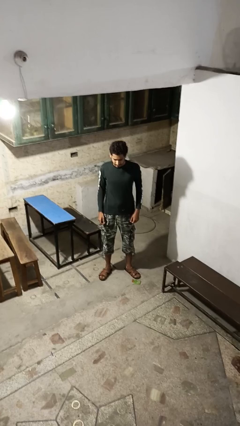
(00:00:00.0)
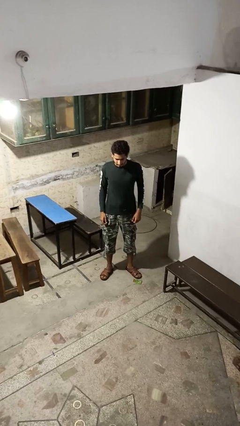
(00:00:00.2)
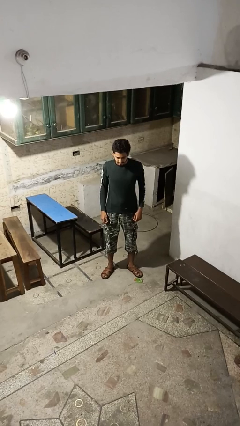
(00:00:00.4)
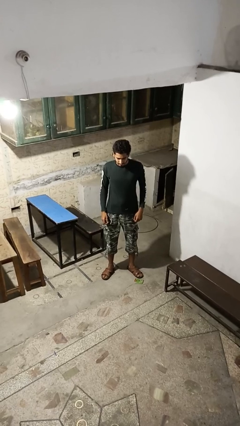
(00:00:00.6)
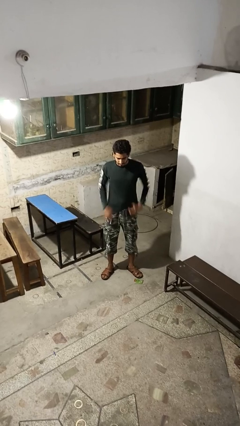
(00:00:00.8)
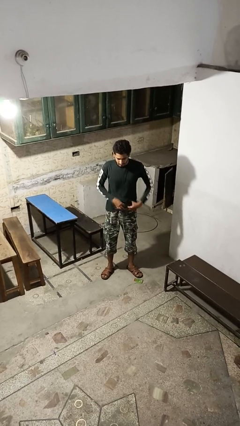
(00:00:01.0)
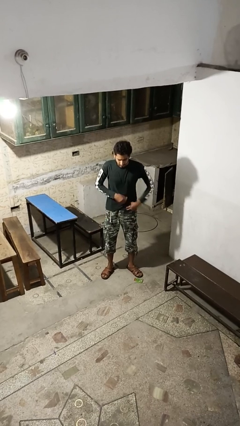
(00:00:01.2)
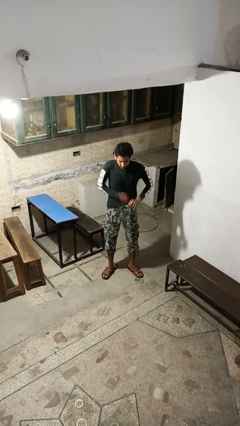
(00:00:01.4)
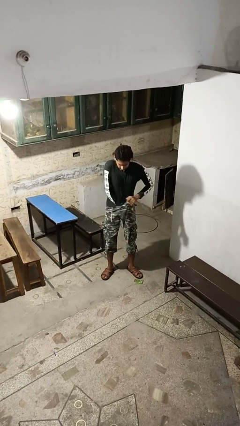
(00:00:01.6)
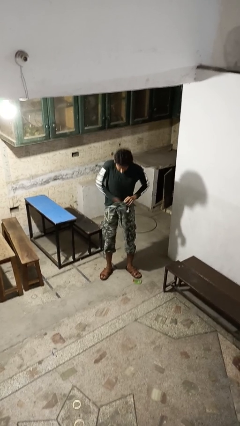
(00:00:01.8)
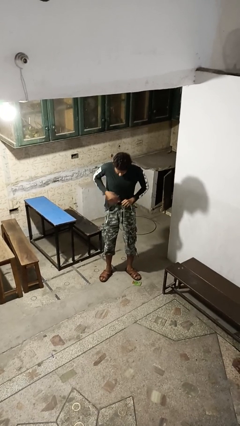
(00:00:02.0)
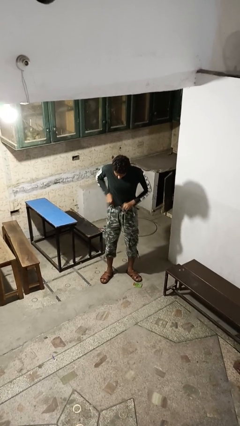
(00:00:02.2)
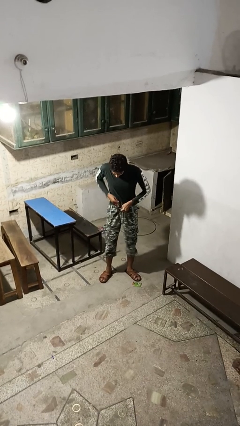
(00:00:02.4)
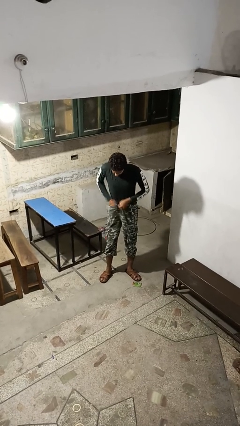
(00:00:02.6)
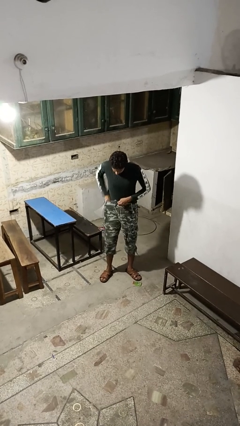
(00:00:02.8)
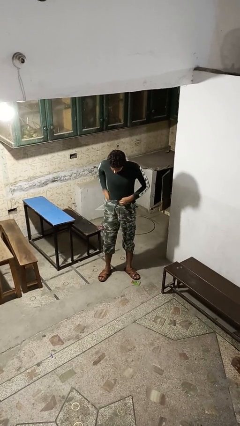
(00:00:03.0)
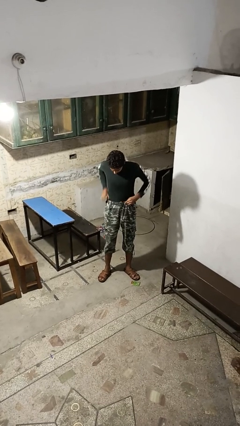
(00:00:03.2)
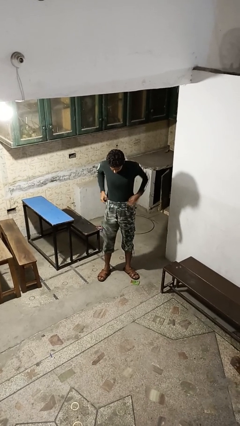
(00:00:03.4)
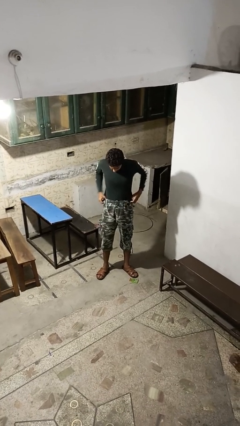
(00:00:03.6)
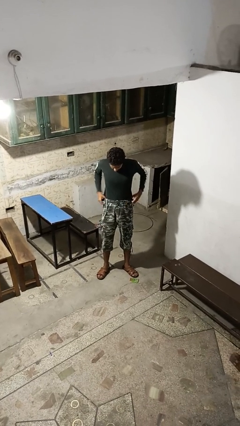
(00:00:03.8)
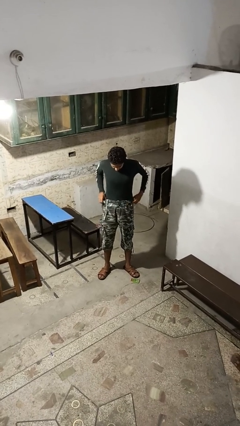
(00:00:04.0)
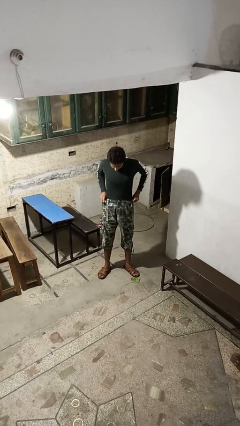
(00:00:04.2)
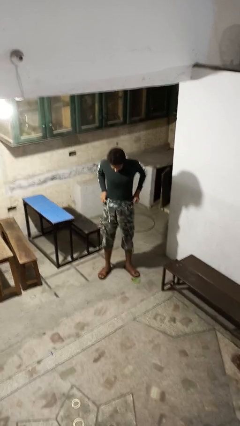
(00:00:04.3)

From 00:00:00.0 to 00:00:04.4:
person tucks in shirt

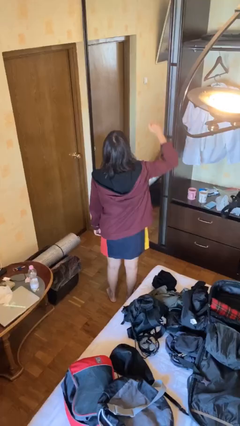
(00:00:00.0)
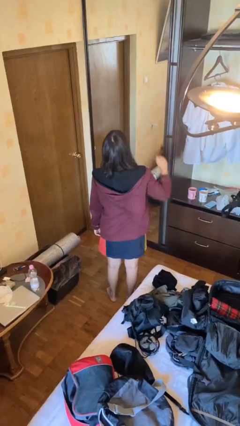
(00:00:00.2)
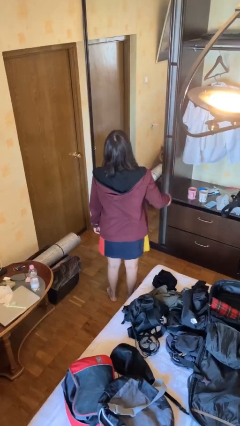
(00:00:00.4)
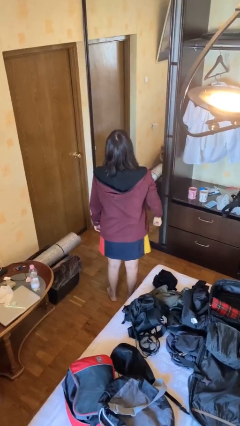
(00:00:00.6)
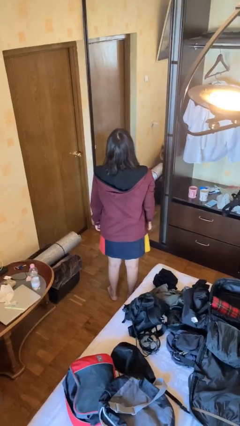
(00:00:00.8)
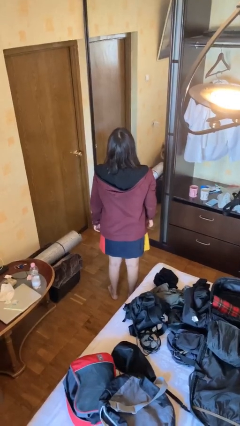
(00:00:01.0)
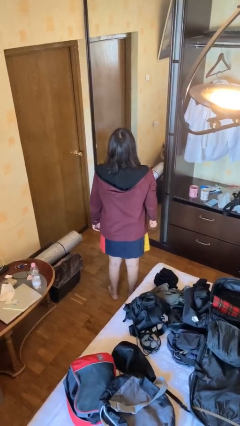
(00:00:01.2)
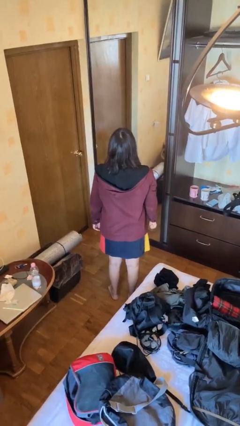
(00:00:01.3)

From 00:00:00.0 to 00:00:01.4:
person gestures lower hand

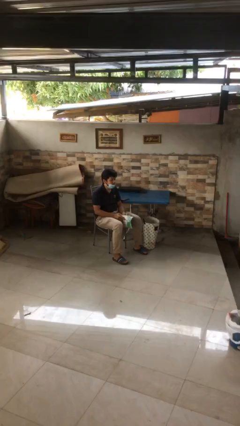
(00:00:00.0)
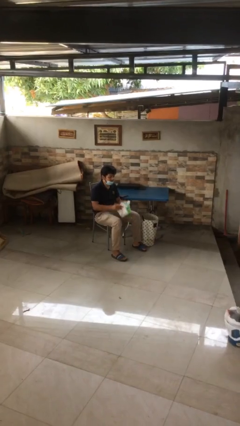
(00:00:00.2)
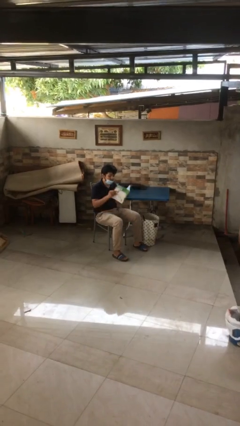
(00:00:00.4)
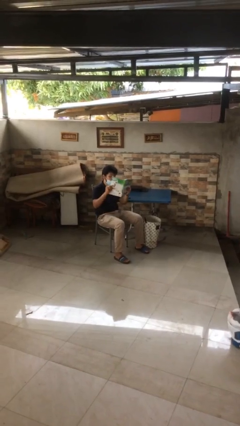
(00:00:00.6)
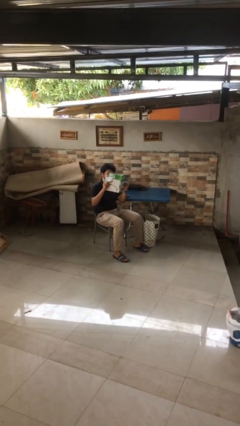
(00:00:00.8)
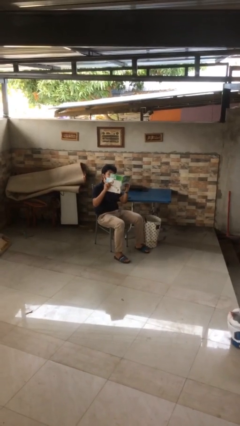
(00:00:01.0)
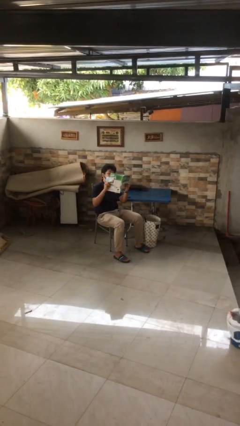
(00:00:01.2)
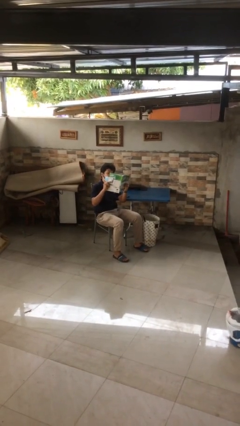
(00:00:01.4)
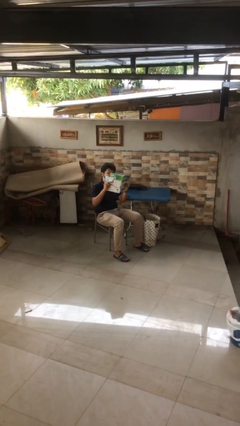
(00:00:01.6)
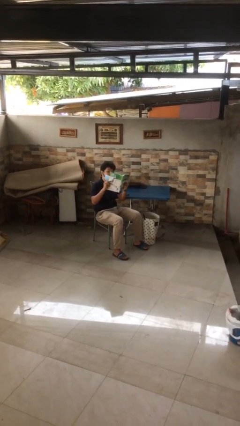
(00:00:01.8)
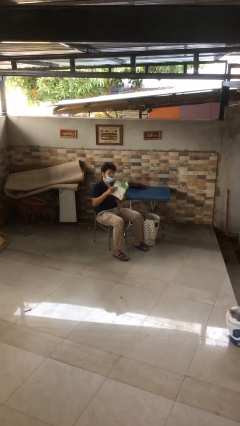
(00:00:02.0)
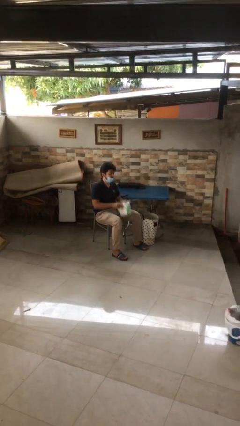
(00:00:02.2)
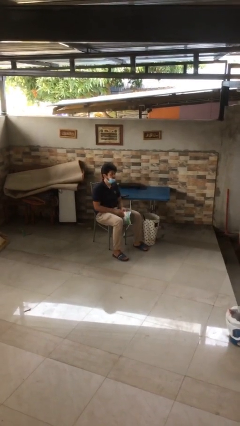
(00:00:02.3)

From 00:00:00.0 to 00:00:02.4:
person reads magazine

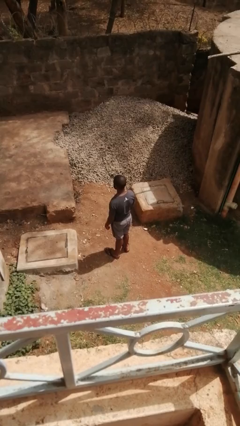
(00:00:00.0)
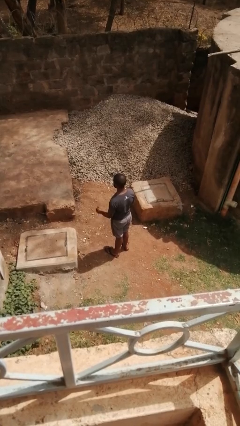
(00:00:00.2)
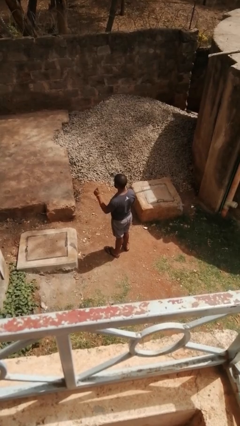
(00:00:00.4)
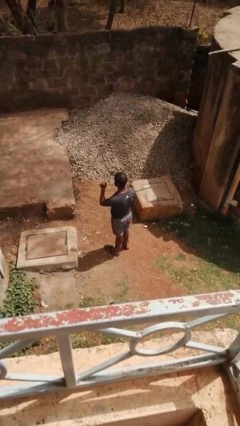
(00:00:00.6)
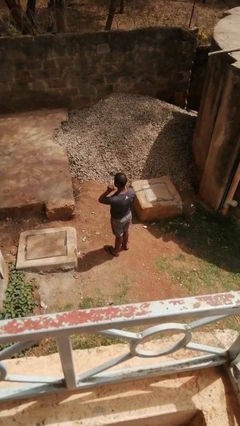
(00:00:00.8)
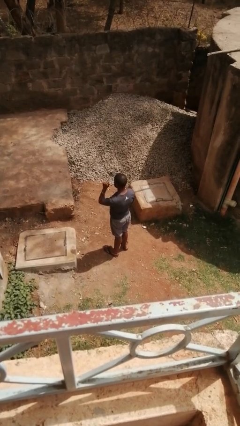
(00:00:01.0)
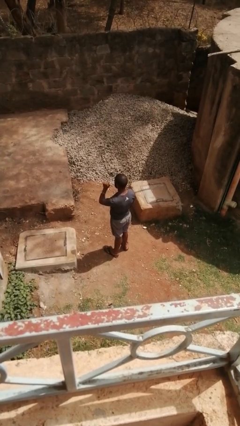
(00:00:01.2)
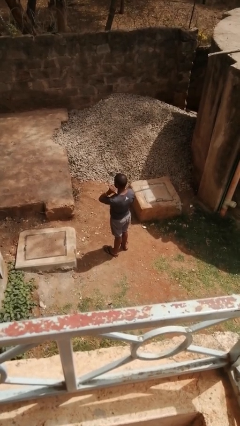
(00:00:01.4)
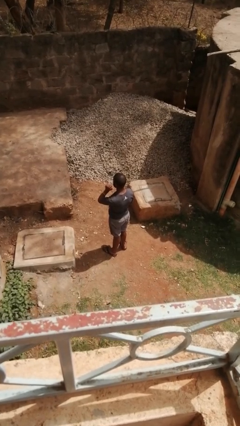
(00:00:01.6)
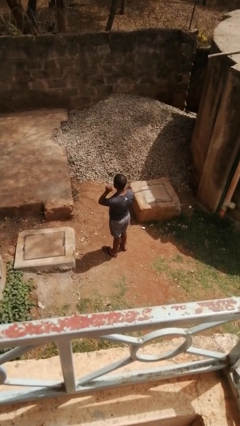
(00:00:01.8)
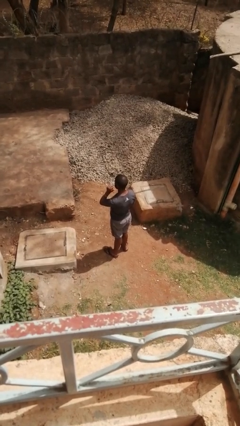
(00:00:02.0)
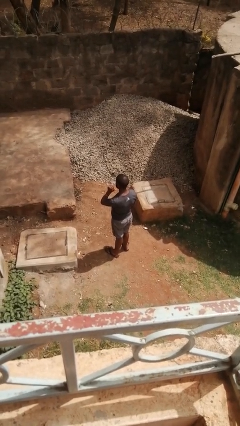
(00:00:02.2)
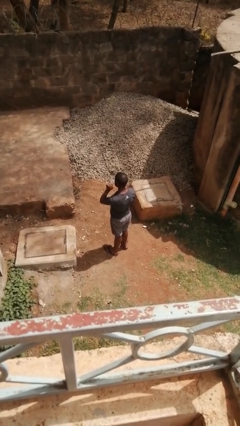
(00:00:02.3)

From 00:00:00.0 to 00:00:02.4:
person gestures behind me

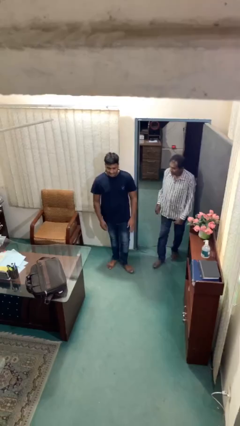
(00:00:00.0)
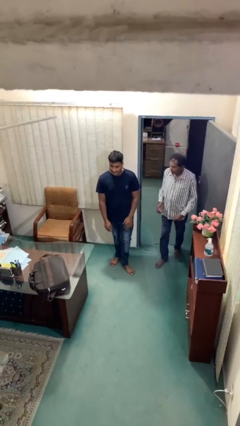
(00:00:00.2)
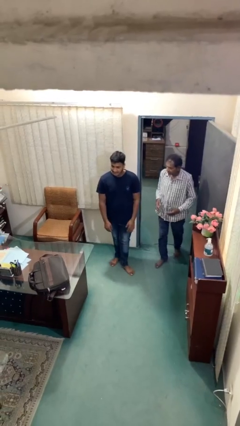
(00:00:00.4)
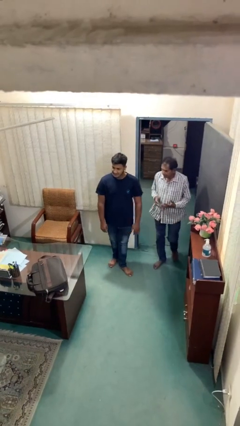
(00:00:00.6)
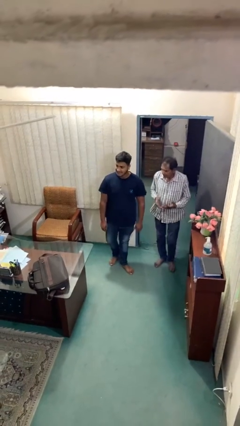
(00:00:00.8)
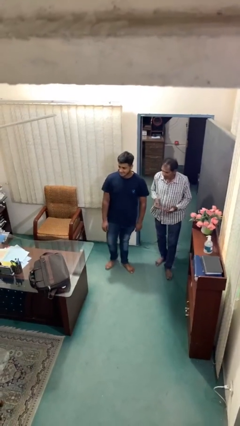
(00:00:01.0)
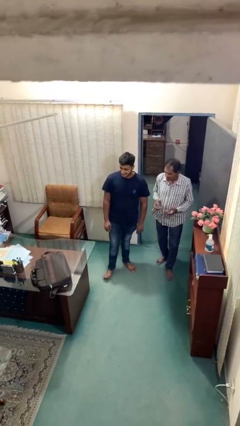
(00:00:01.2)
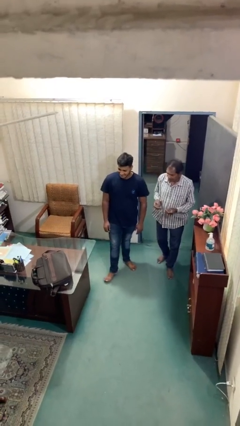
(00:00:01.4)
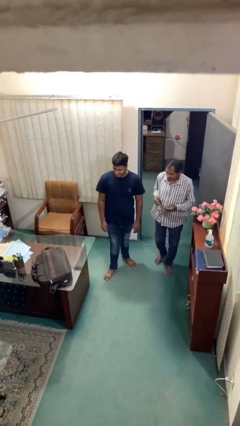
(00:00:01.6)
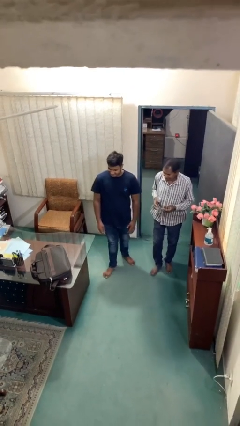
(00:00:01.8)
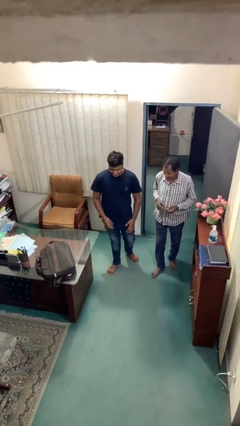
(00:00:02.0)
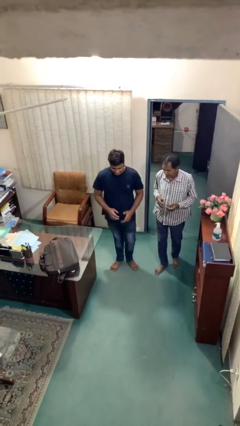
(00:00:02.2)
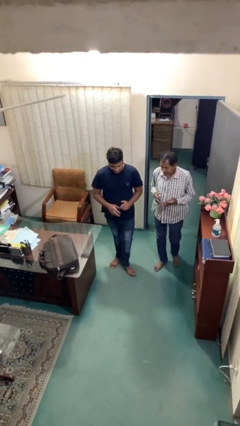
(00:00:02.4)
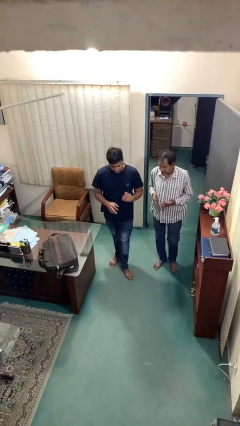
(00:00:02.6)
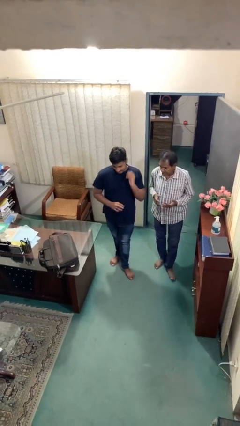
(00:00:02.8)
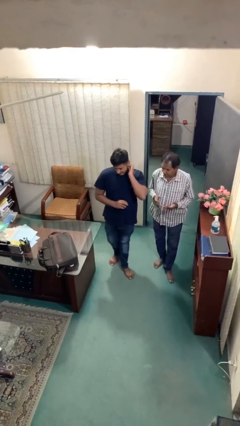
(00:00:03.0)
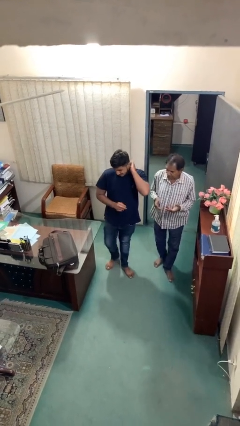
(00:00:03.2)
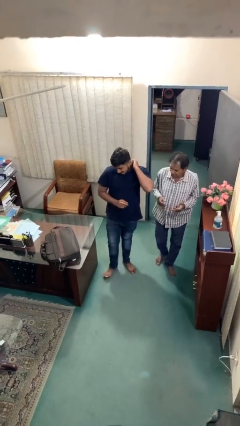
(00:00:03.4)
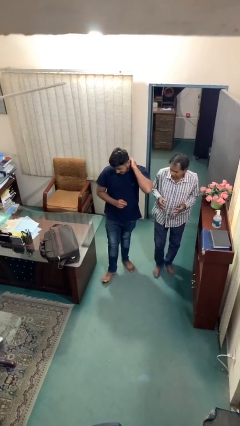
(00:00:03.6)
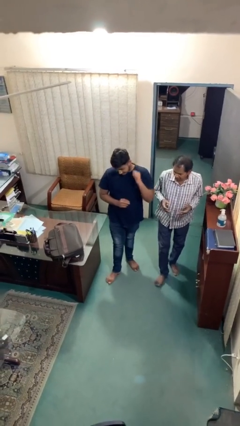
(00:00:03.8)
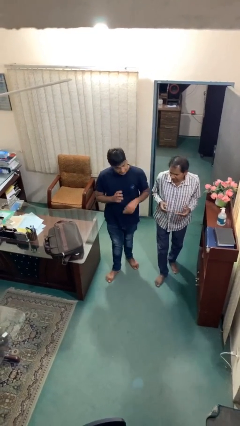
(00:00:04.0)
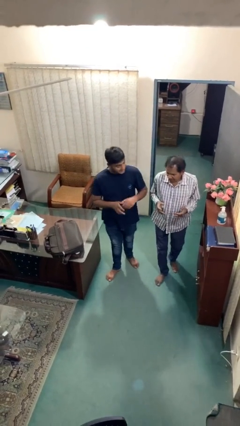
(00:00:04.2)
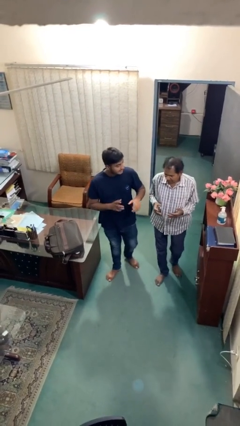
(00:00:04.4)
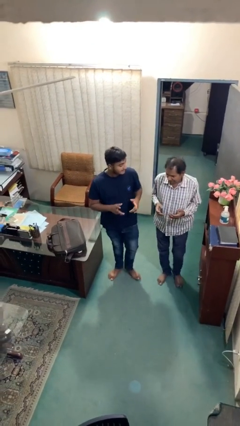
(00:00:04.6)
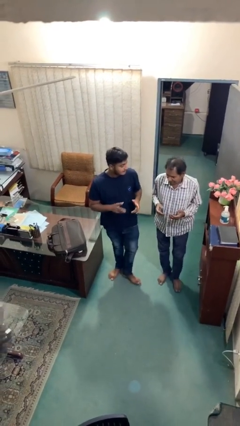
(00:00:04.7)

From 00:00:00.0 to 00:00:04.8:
person talks to person

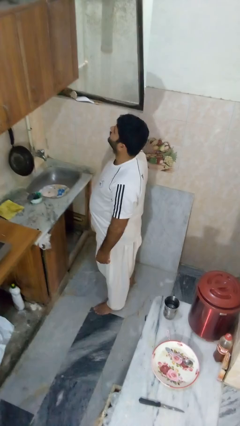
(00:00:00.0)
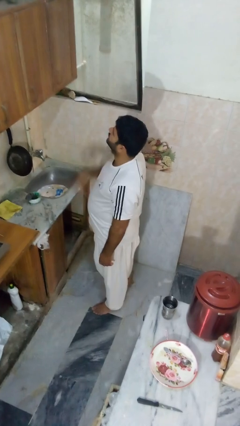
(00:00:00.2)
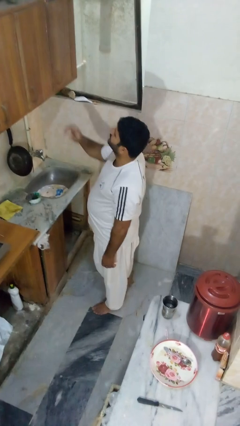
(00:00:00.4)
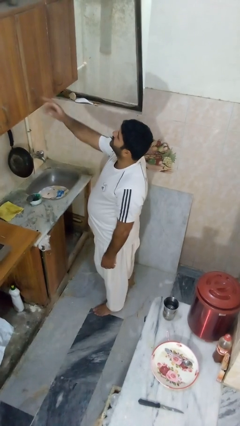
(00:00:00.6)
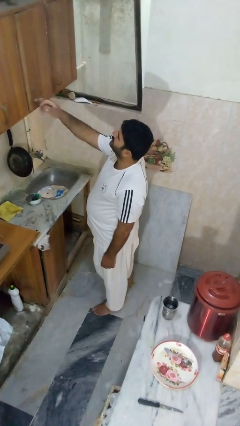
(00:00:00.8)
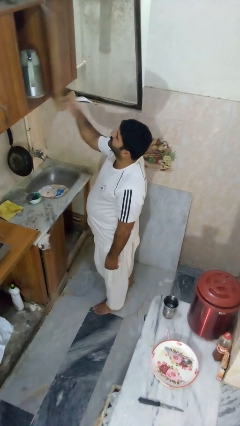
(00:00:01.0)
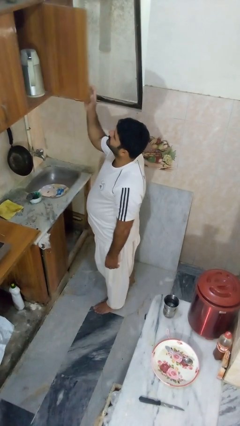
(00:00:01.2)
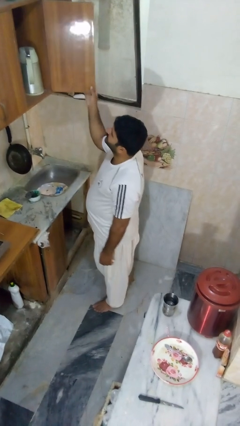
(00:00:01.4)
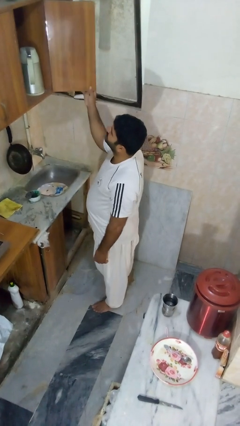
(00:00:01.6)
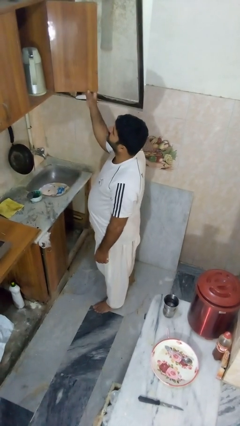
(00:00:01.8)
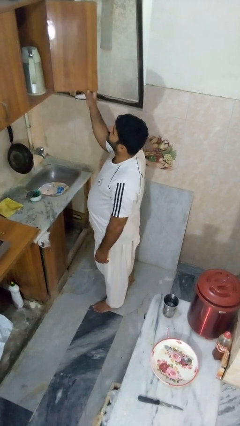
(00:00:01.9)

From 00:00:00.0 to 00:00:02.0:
person opens cabinet
